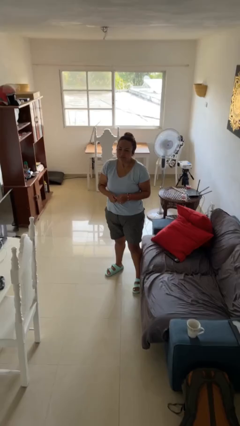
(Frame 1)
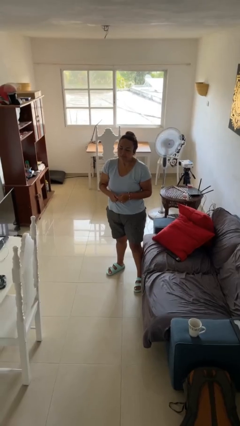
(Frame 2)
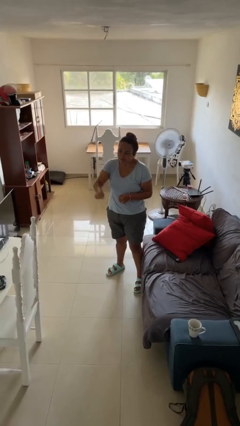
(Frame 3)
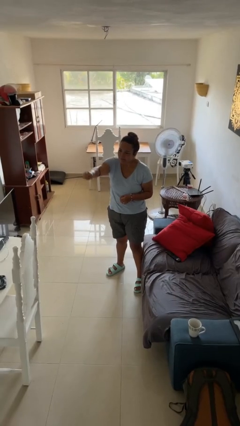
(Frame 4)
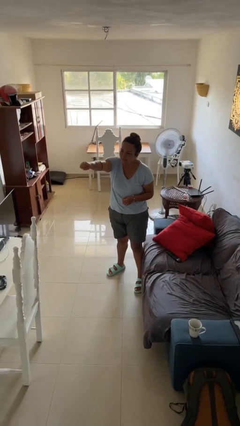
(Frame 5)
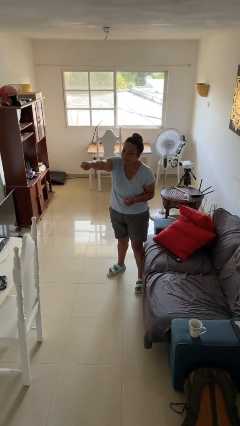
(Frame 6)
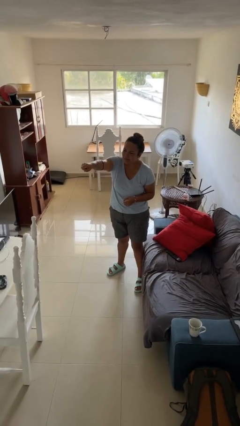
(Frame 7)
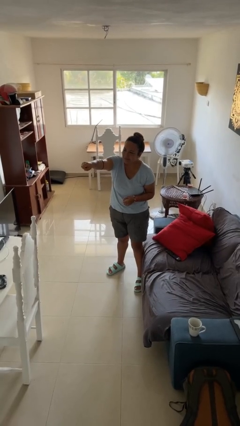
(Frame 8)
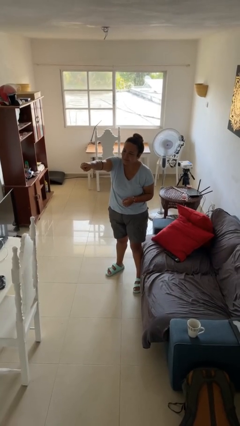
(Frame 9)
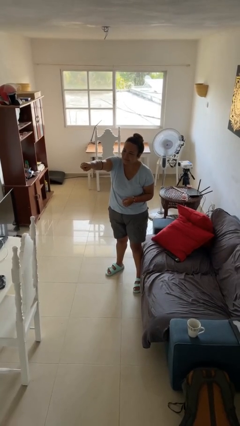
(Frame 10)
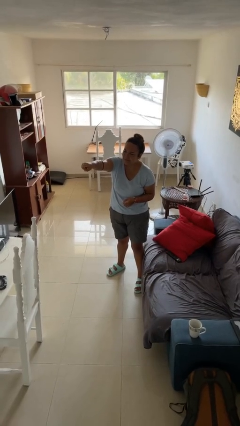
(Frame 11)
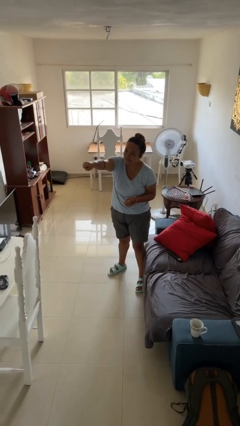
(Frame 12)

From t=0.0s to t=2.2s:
person points at person

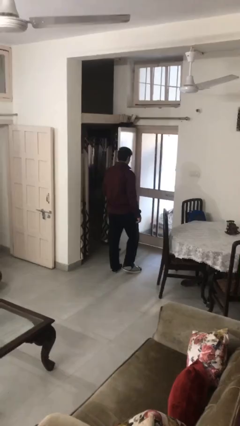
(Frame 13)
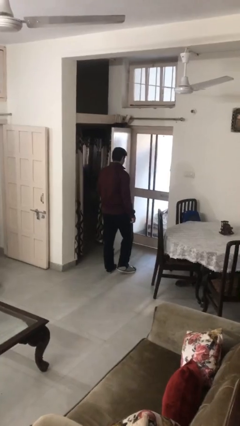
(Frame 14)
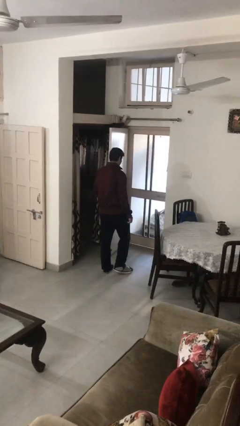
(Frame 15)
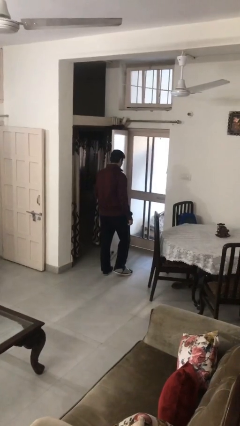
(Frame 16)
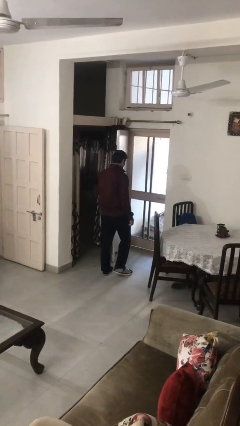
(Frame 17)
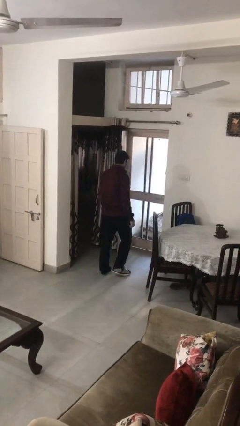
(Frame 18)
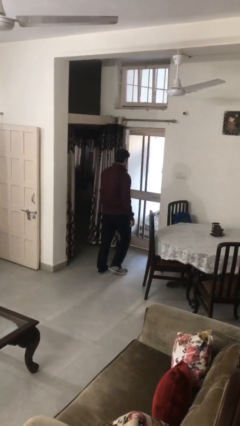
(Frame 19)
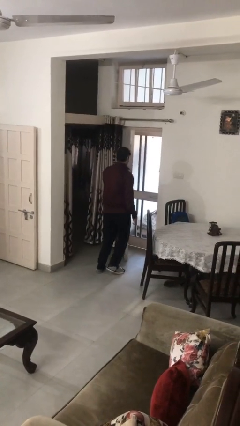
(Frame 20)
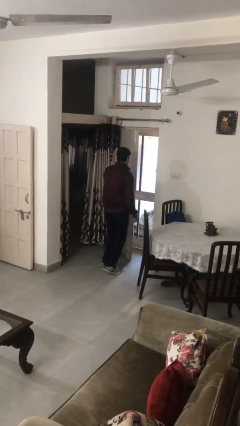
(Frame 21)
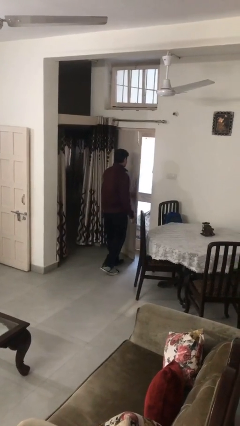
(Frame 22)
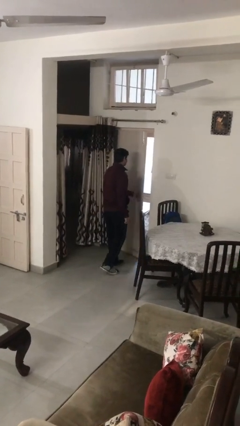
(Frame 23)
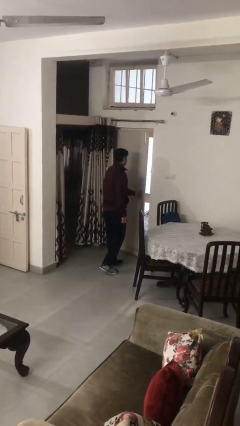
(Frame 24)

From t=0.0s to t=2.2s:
person closes facility door

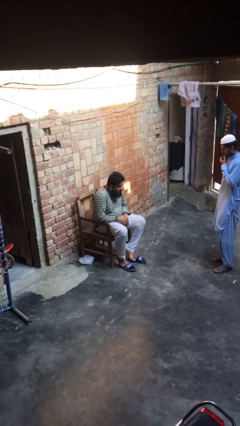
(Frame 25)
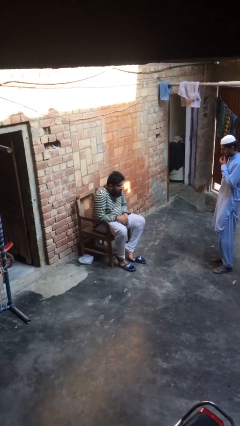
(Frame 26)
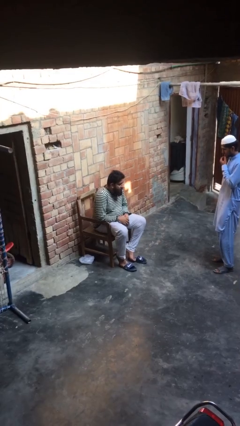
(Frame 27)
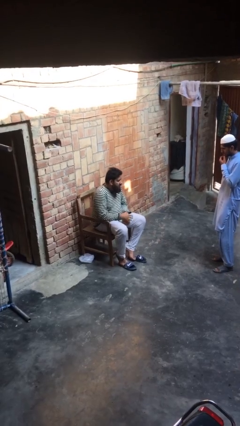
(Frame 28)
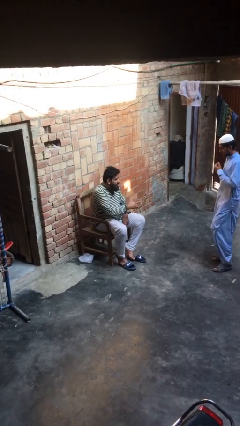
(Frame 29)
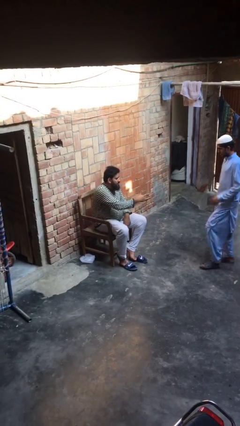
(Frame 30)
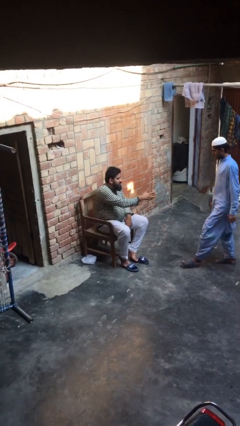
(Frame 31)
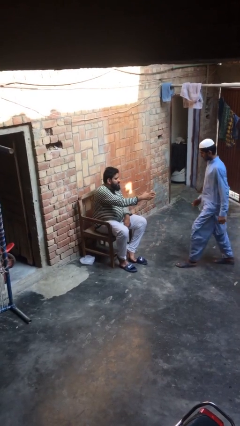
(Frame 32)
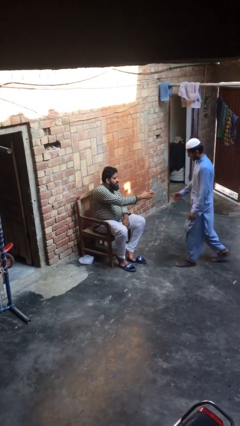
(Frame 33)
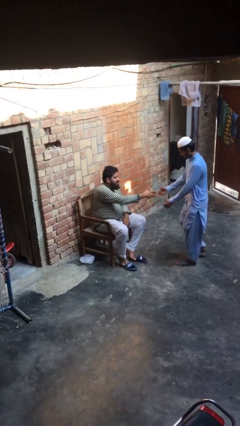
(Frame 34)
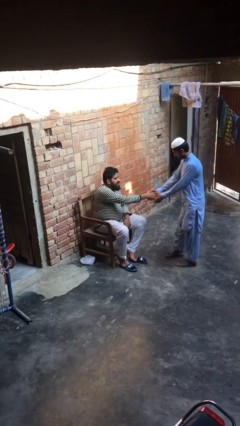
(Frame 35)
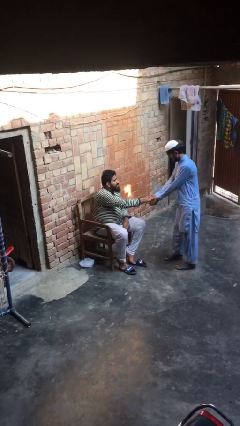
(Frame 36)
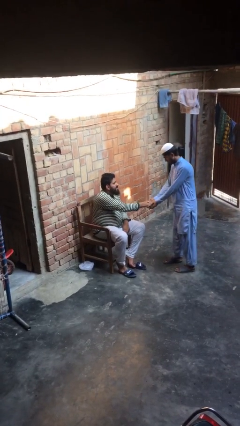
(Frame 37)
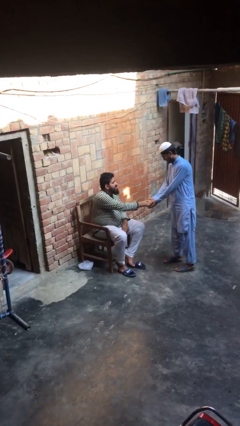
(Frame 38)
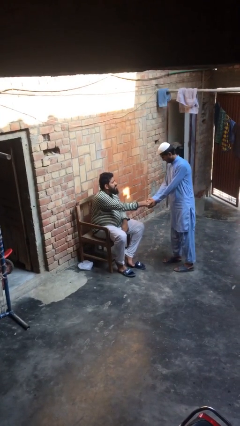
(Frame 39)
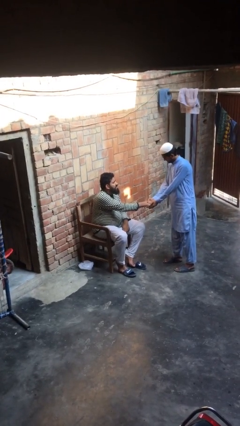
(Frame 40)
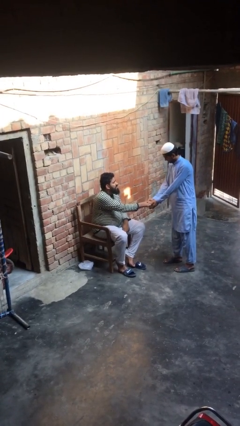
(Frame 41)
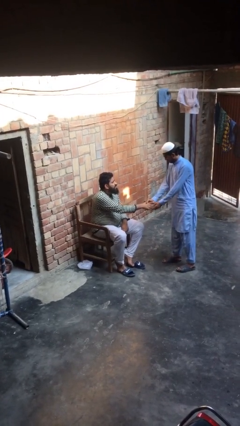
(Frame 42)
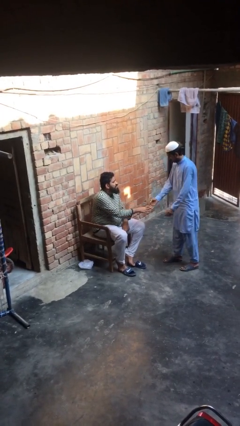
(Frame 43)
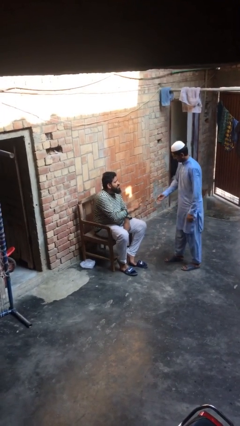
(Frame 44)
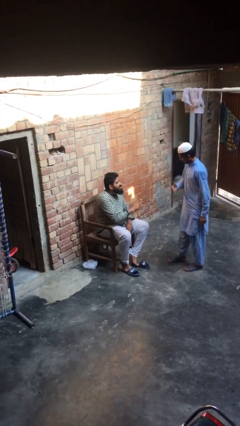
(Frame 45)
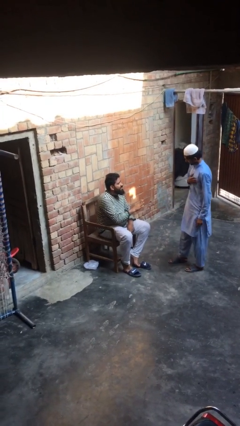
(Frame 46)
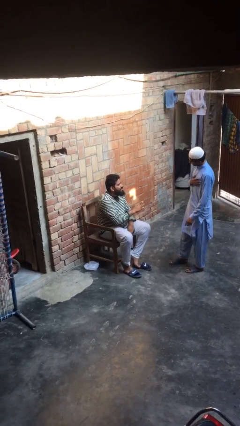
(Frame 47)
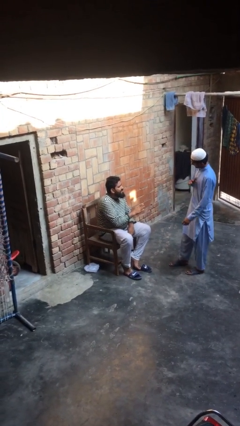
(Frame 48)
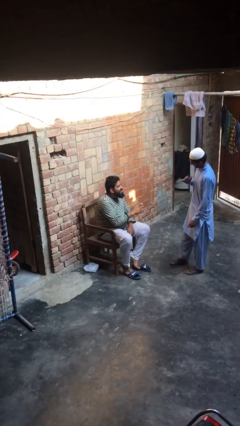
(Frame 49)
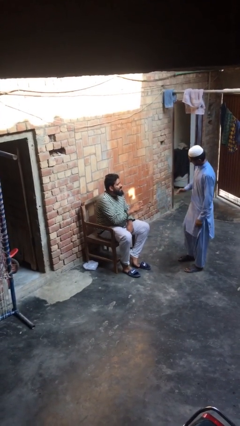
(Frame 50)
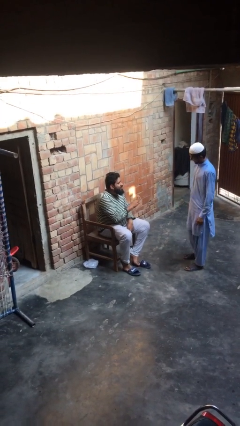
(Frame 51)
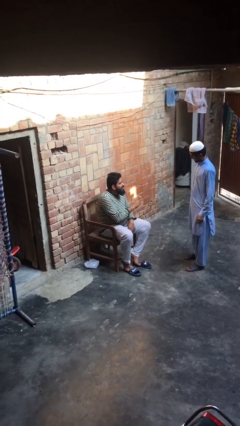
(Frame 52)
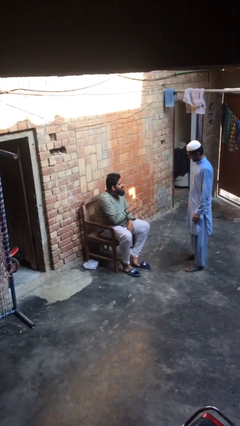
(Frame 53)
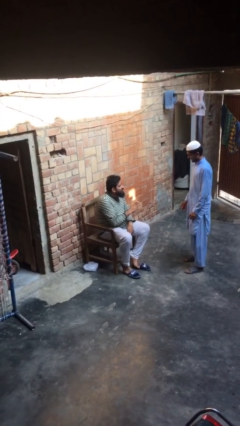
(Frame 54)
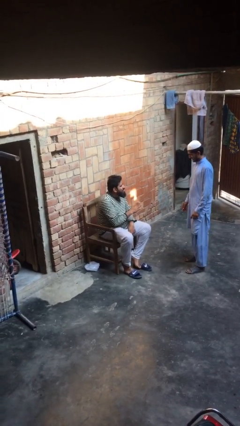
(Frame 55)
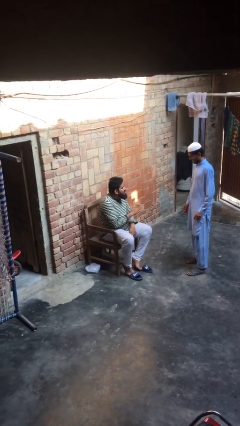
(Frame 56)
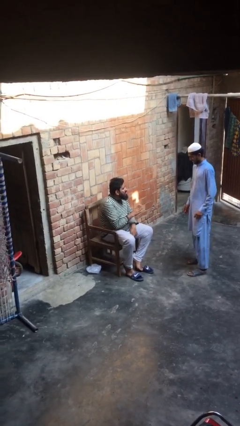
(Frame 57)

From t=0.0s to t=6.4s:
person shakes hand

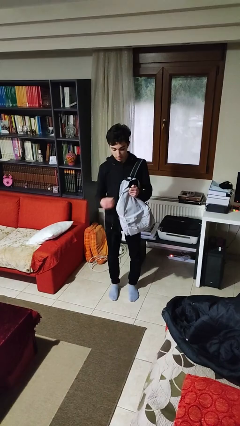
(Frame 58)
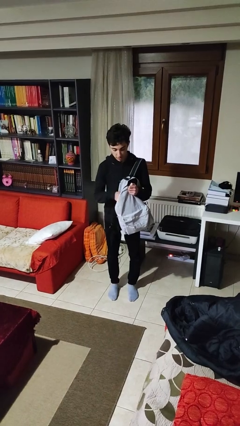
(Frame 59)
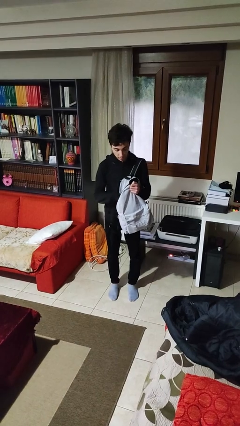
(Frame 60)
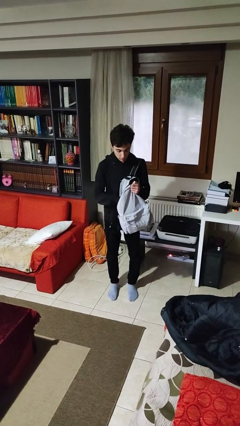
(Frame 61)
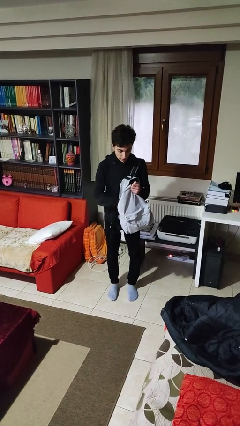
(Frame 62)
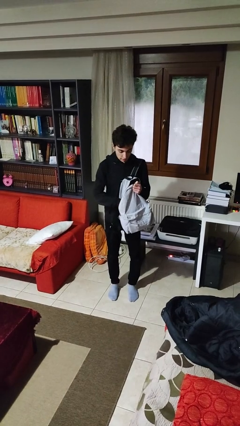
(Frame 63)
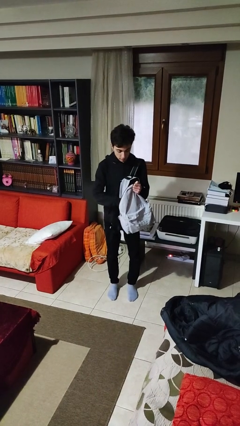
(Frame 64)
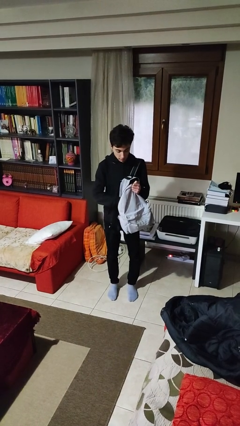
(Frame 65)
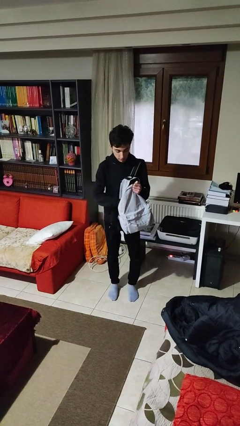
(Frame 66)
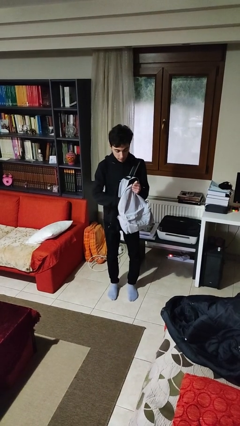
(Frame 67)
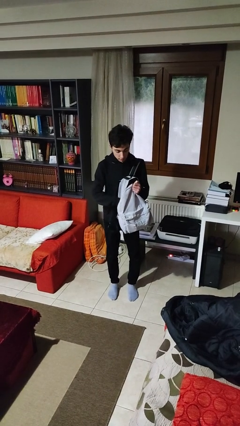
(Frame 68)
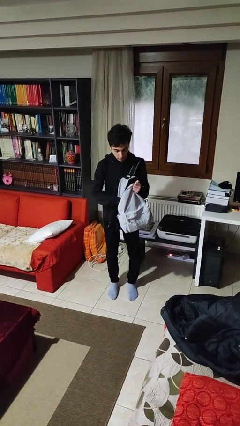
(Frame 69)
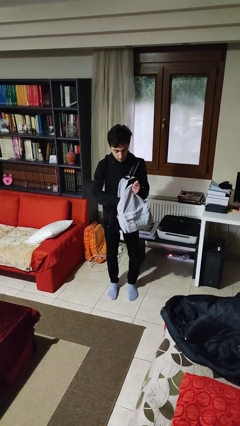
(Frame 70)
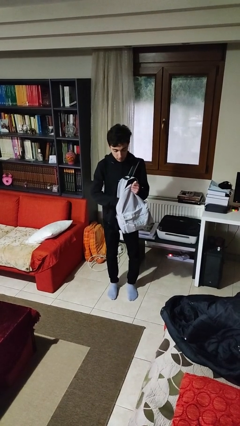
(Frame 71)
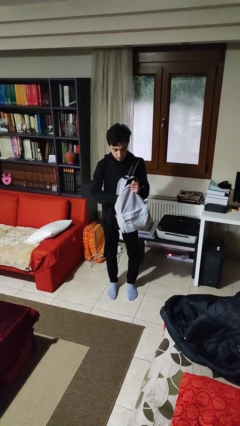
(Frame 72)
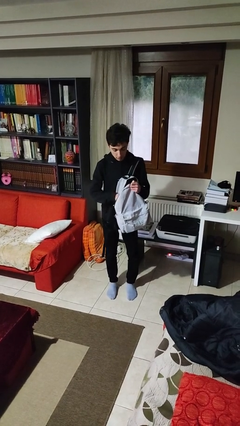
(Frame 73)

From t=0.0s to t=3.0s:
person searches in backpack

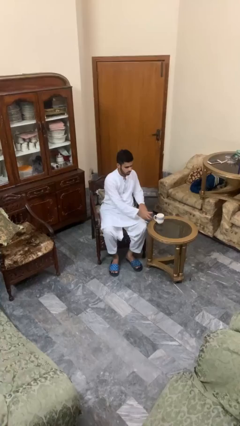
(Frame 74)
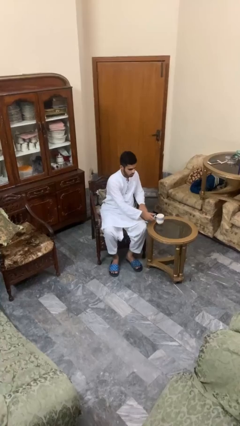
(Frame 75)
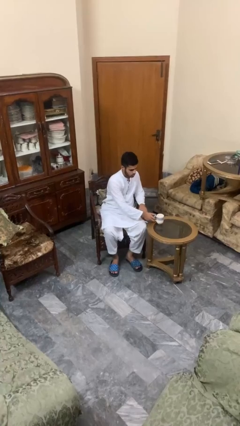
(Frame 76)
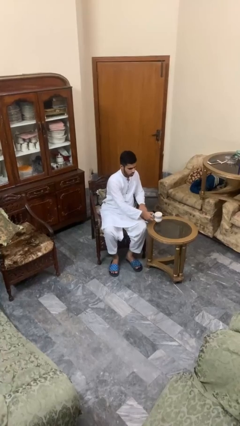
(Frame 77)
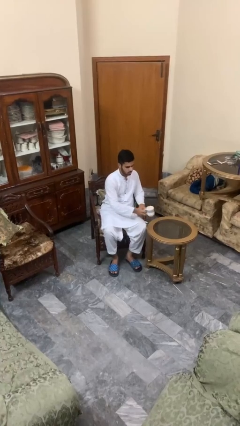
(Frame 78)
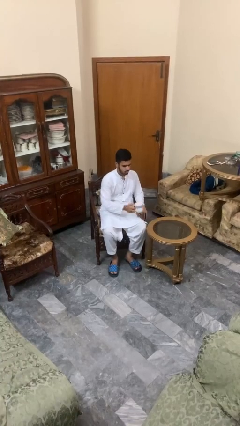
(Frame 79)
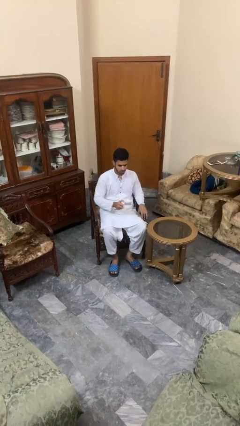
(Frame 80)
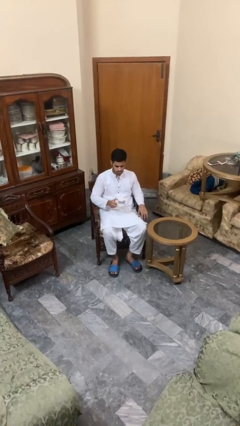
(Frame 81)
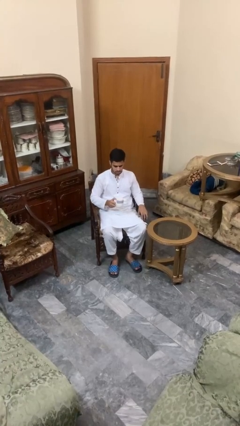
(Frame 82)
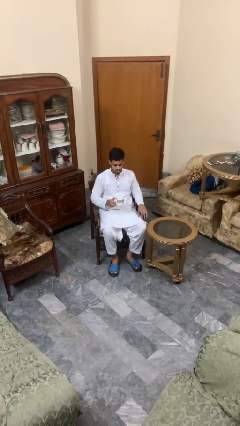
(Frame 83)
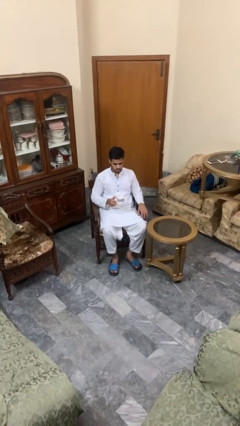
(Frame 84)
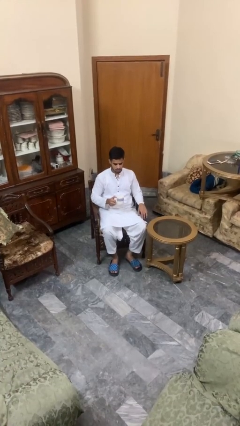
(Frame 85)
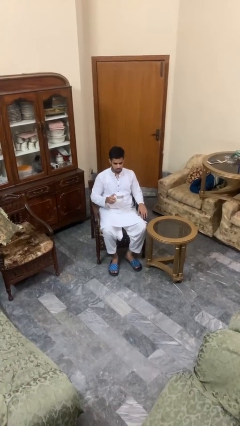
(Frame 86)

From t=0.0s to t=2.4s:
person picks up object from table

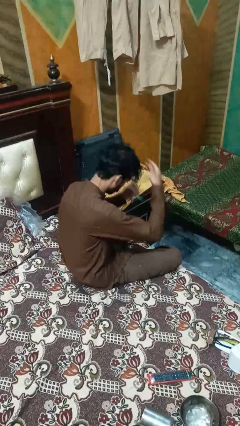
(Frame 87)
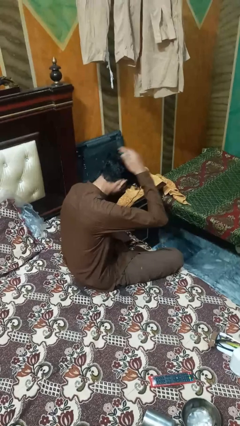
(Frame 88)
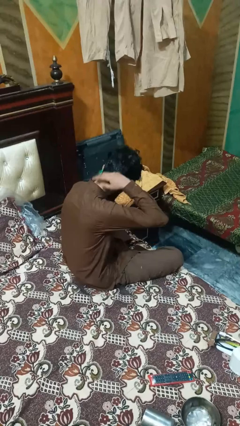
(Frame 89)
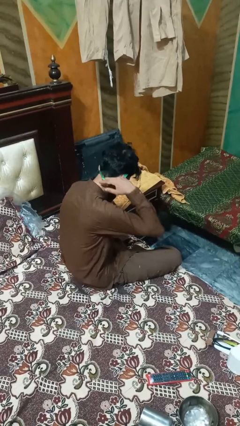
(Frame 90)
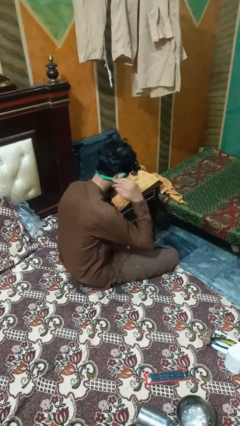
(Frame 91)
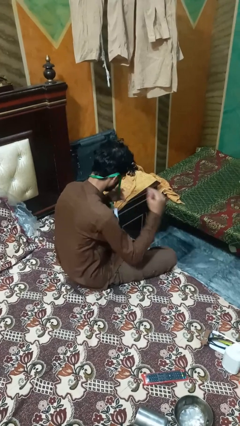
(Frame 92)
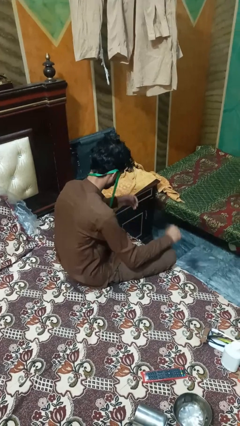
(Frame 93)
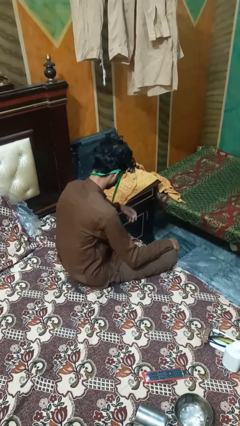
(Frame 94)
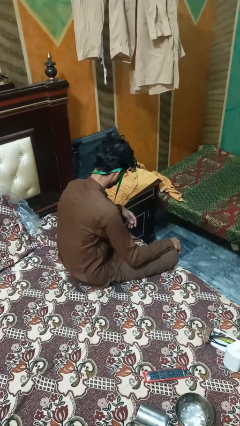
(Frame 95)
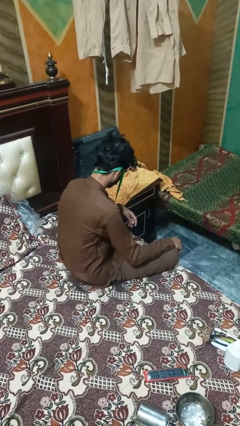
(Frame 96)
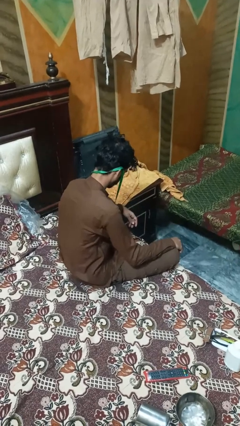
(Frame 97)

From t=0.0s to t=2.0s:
person puts on necklace
